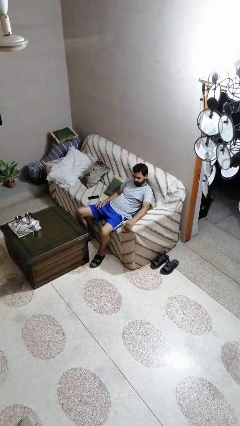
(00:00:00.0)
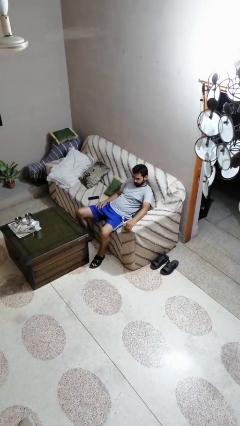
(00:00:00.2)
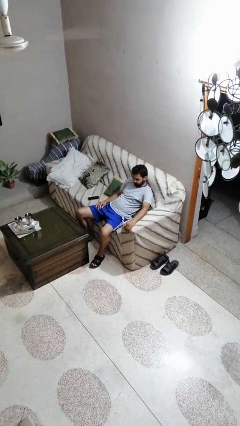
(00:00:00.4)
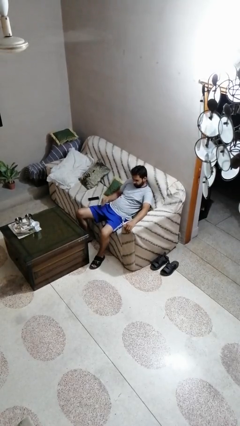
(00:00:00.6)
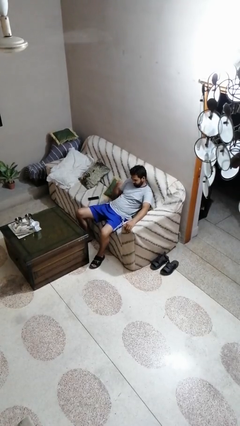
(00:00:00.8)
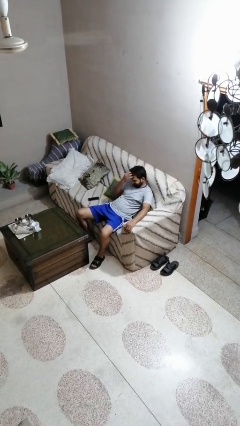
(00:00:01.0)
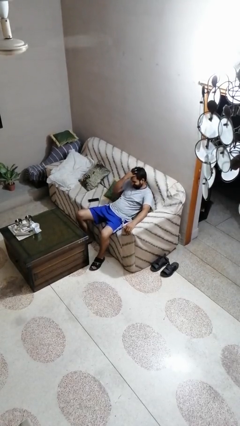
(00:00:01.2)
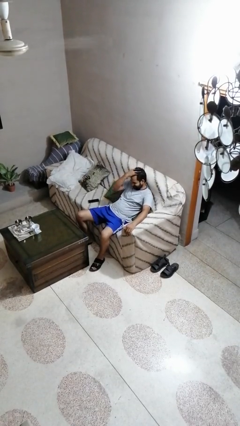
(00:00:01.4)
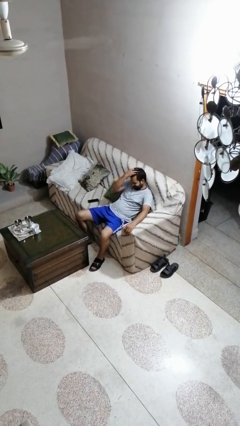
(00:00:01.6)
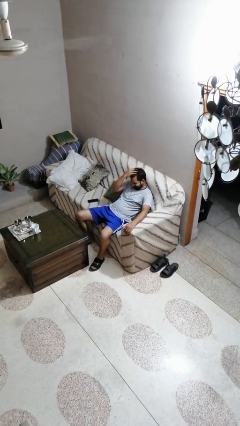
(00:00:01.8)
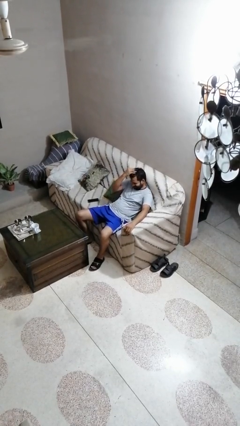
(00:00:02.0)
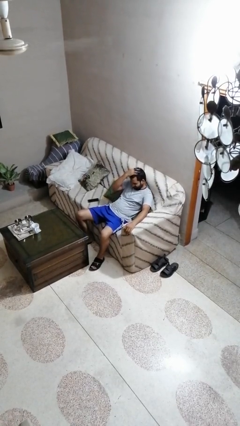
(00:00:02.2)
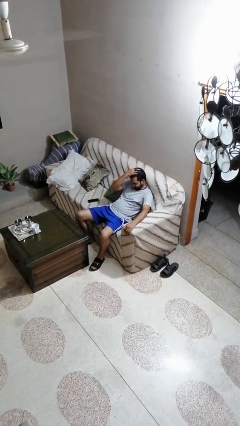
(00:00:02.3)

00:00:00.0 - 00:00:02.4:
person strokes hair

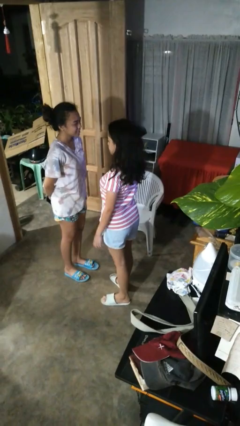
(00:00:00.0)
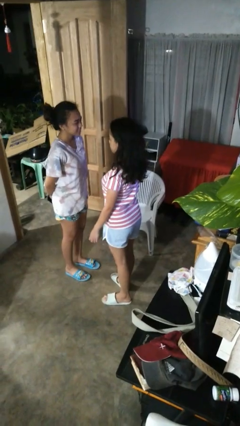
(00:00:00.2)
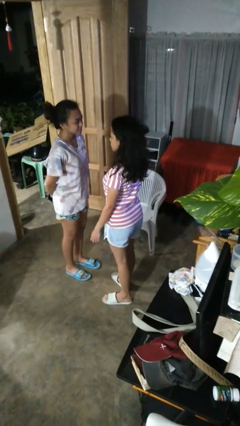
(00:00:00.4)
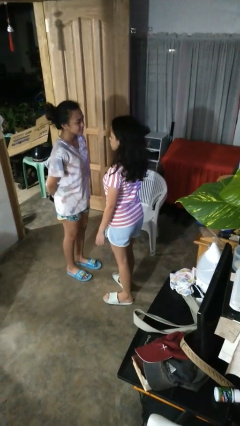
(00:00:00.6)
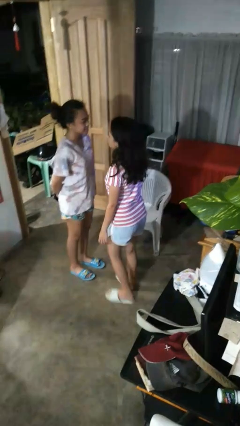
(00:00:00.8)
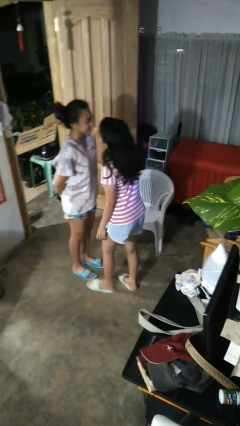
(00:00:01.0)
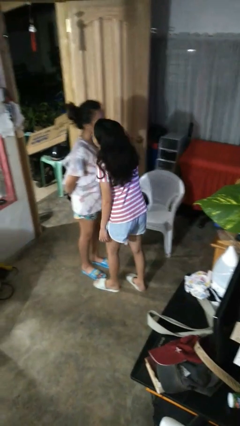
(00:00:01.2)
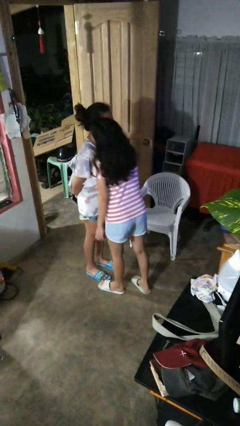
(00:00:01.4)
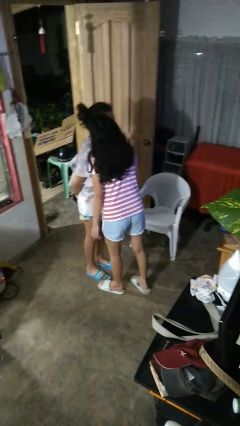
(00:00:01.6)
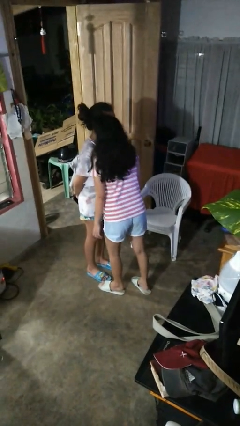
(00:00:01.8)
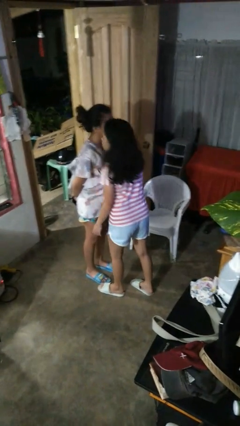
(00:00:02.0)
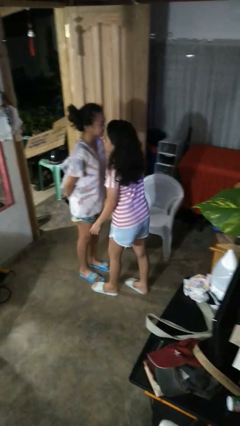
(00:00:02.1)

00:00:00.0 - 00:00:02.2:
person kisses cheek of person

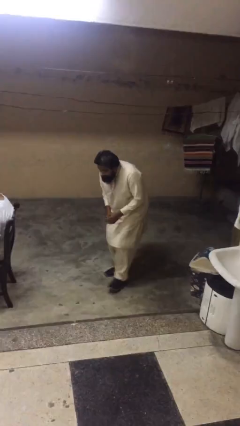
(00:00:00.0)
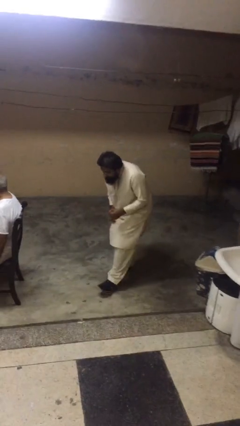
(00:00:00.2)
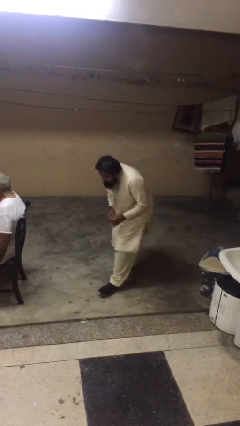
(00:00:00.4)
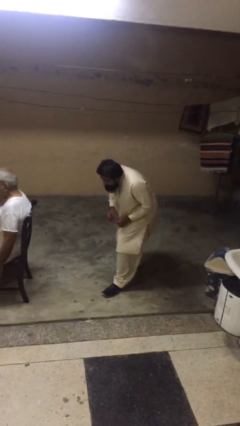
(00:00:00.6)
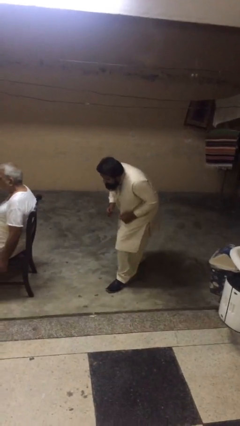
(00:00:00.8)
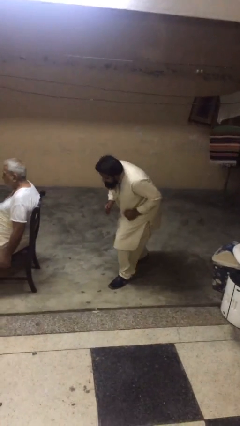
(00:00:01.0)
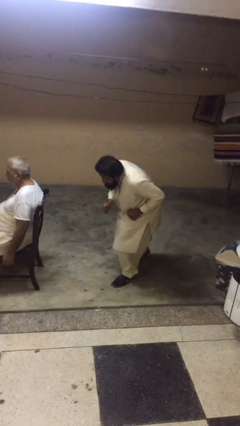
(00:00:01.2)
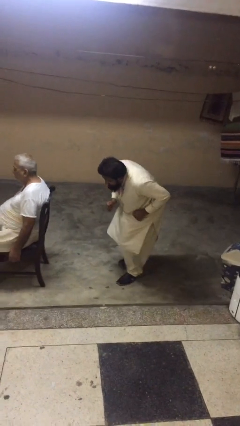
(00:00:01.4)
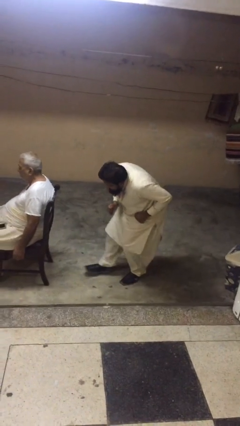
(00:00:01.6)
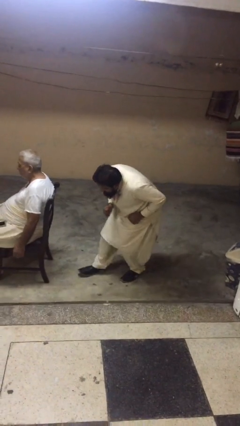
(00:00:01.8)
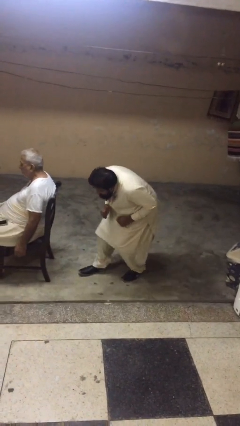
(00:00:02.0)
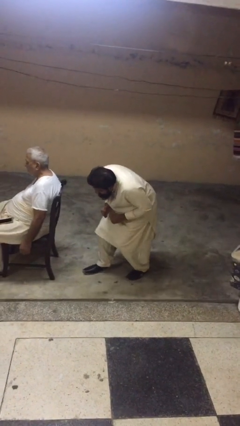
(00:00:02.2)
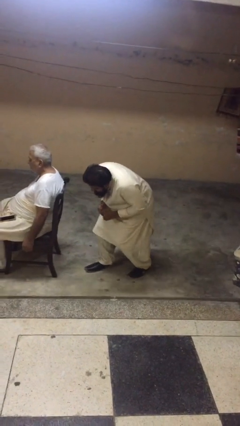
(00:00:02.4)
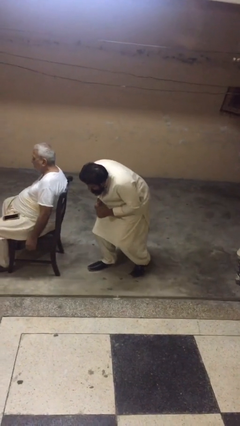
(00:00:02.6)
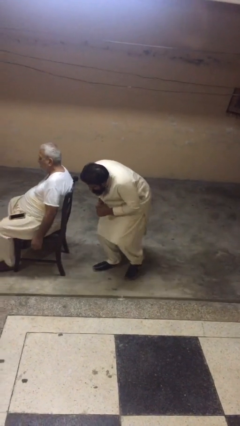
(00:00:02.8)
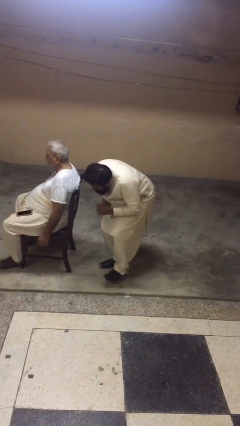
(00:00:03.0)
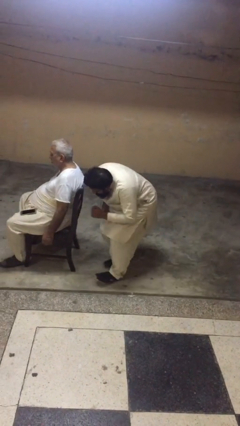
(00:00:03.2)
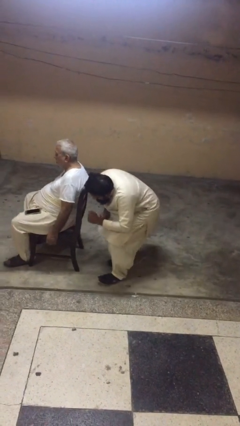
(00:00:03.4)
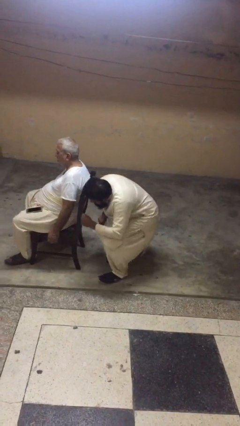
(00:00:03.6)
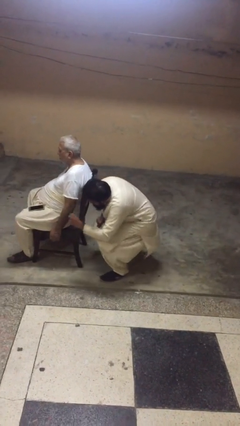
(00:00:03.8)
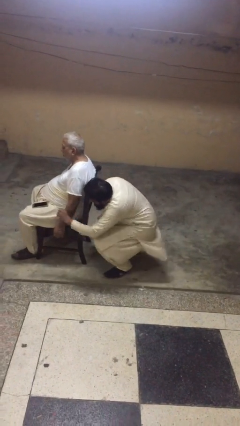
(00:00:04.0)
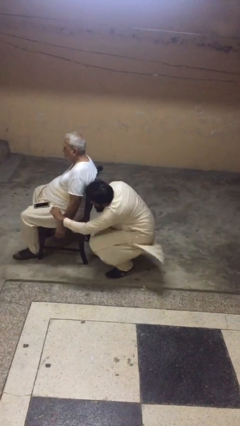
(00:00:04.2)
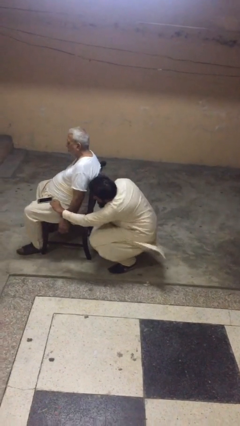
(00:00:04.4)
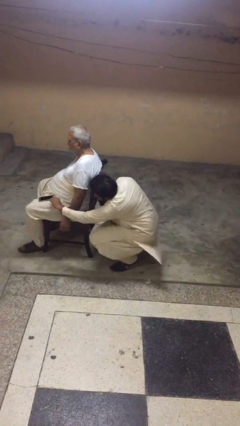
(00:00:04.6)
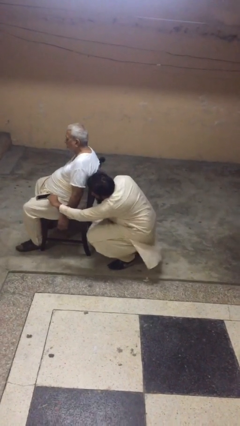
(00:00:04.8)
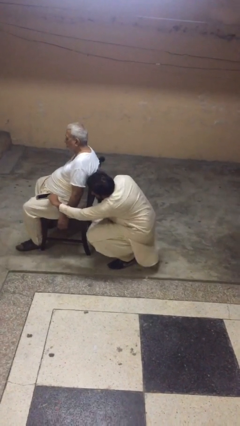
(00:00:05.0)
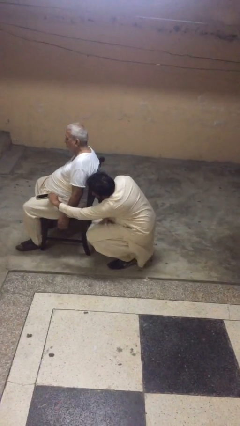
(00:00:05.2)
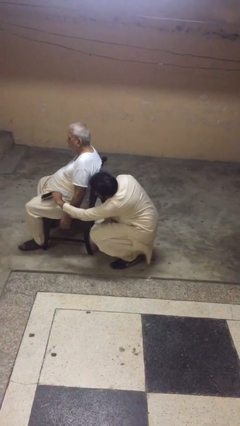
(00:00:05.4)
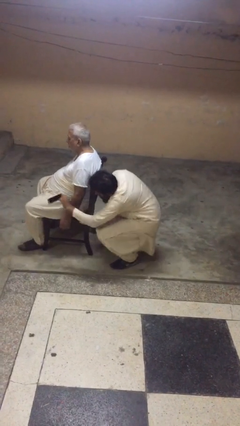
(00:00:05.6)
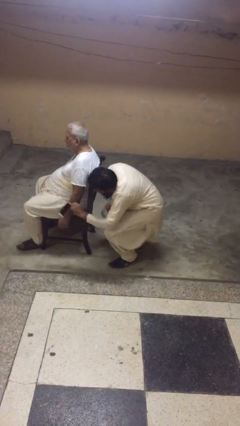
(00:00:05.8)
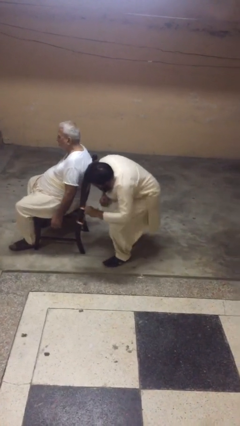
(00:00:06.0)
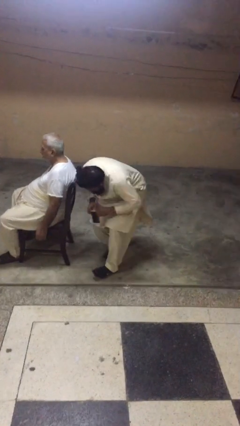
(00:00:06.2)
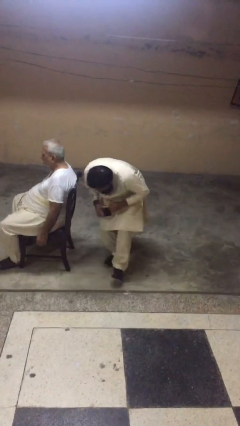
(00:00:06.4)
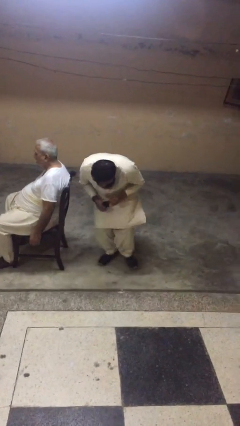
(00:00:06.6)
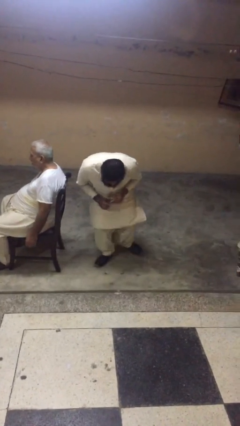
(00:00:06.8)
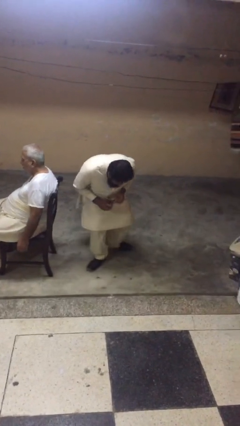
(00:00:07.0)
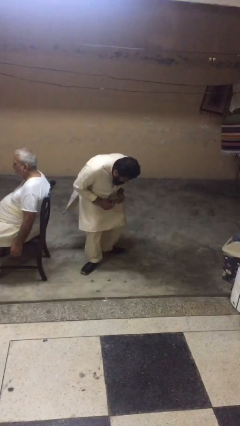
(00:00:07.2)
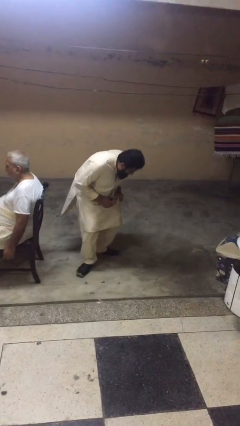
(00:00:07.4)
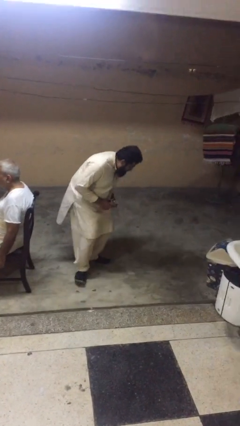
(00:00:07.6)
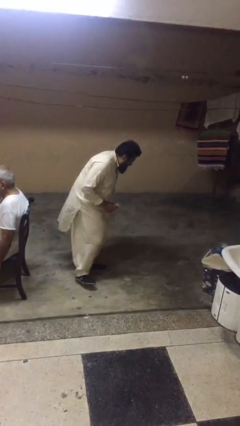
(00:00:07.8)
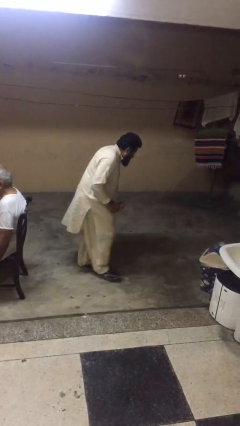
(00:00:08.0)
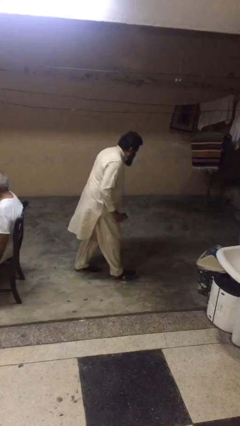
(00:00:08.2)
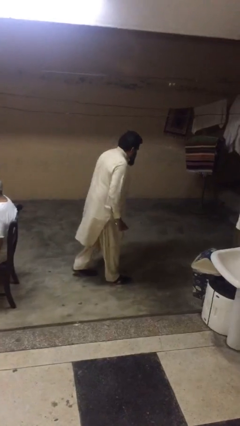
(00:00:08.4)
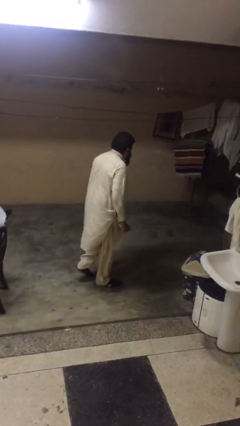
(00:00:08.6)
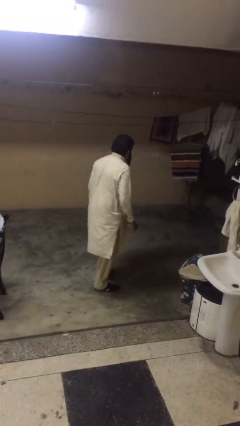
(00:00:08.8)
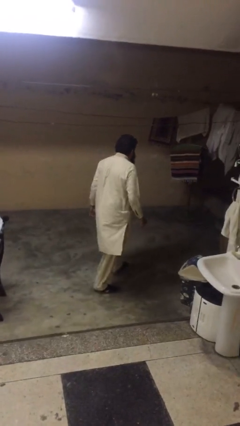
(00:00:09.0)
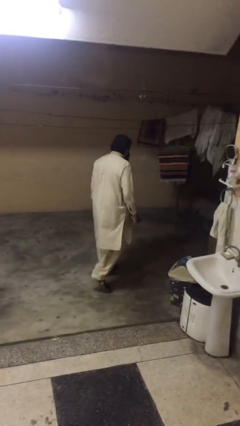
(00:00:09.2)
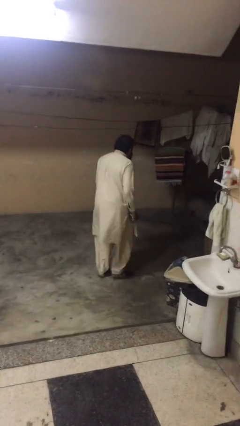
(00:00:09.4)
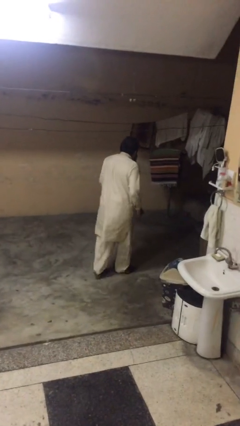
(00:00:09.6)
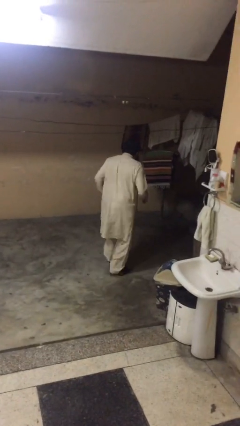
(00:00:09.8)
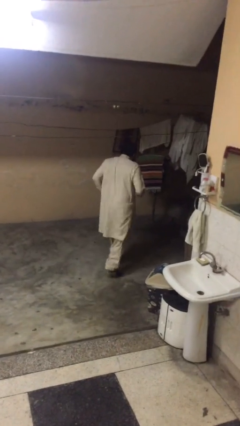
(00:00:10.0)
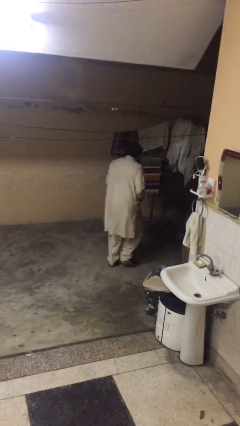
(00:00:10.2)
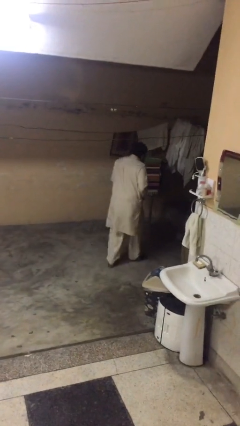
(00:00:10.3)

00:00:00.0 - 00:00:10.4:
person steals object from person

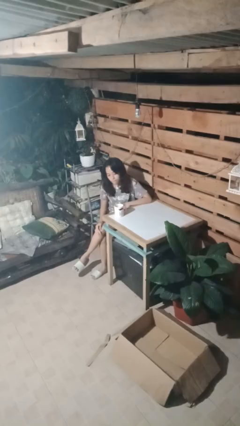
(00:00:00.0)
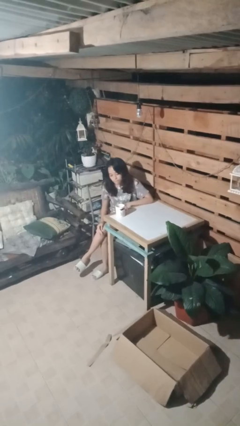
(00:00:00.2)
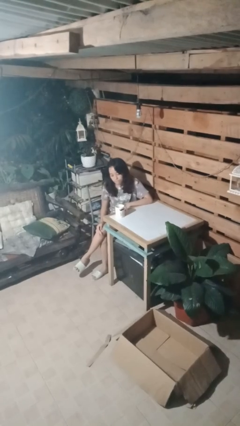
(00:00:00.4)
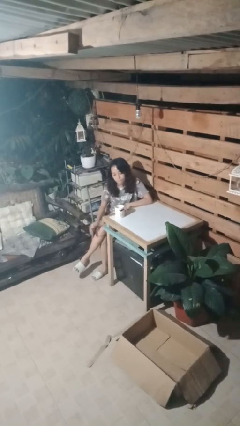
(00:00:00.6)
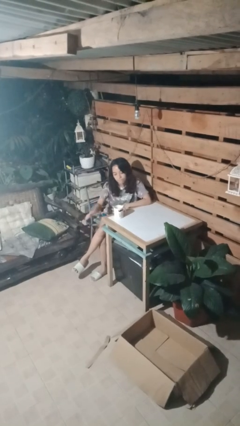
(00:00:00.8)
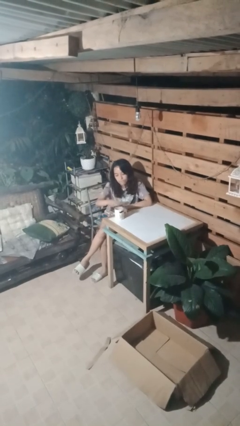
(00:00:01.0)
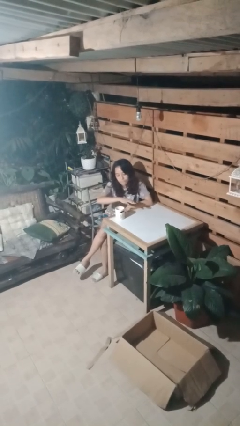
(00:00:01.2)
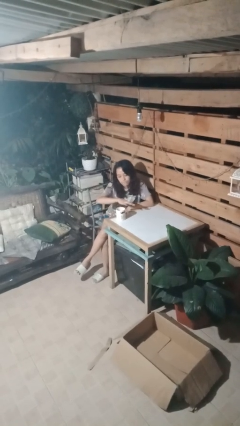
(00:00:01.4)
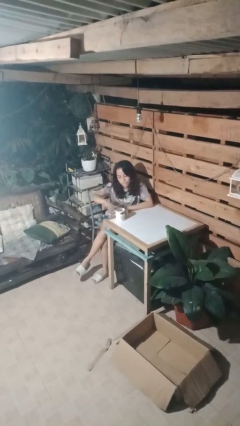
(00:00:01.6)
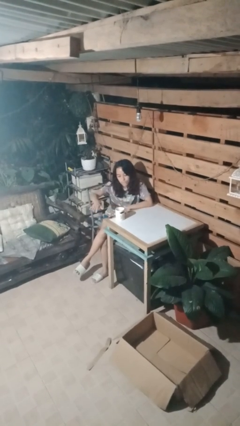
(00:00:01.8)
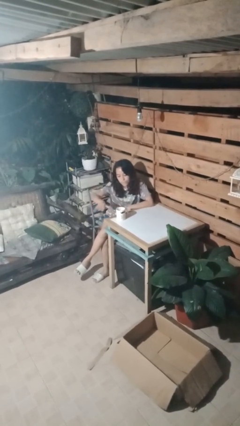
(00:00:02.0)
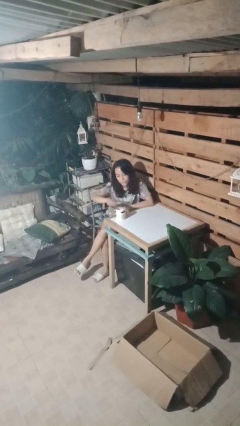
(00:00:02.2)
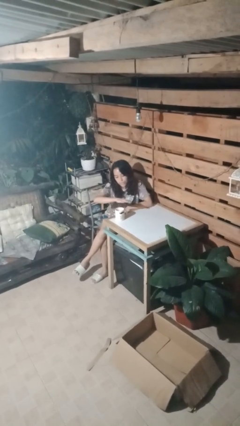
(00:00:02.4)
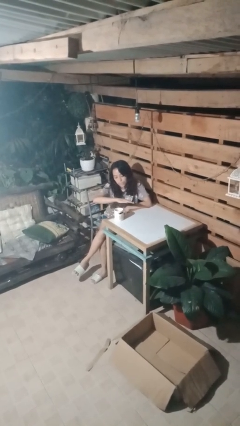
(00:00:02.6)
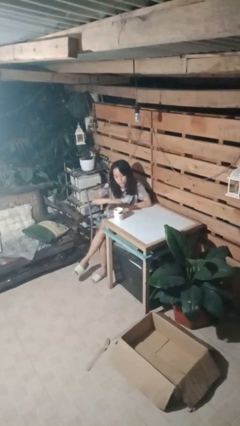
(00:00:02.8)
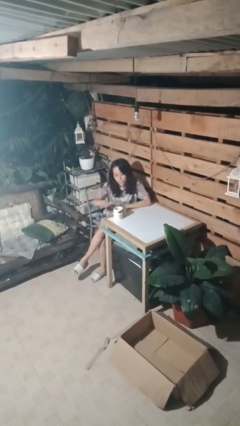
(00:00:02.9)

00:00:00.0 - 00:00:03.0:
person waves hand over object
